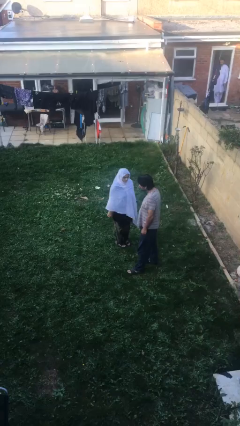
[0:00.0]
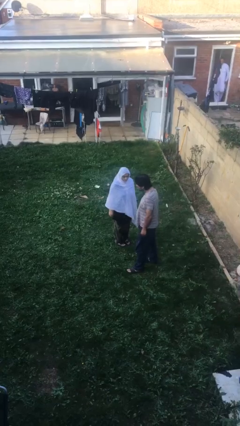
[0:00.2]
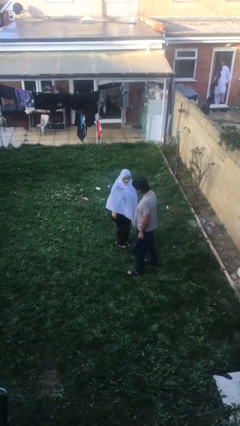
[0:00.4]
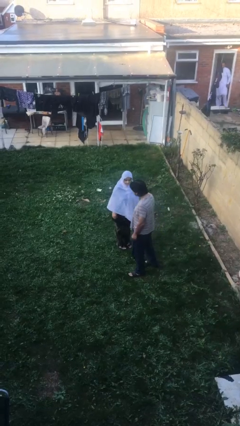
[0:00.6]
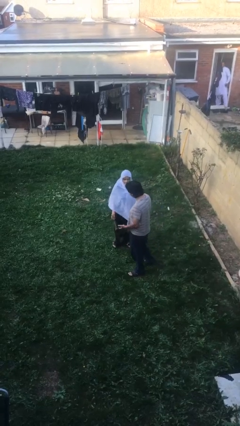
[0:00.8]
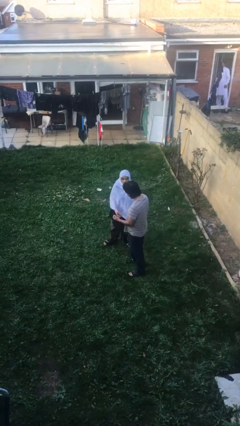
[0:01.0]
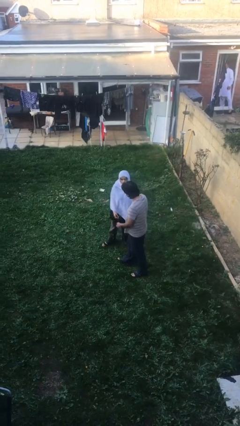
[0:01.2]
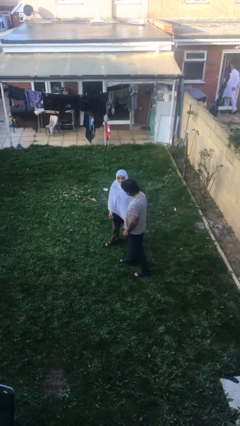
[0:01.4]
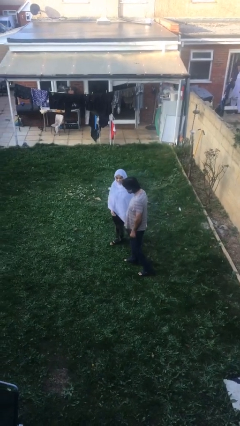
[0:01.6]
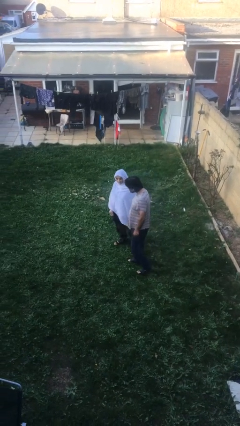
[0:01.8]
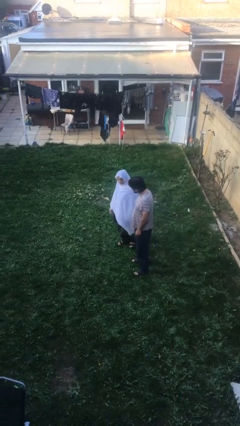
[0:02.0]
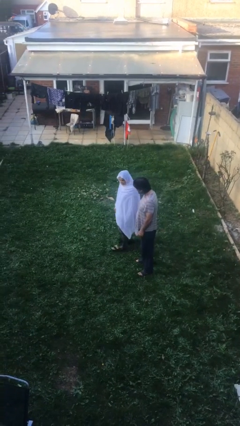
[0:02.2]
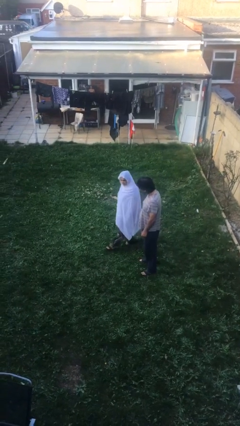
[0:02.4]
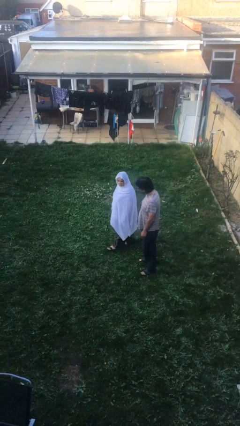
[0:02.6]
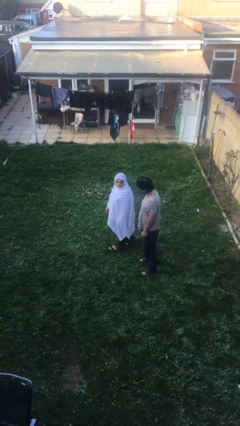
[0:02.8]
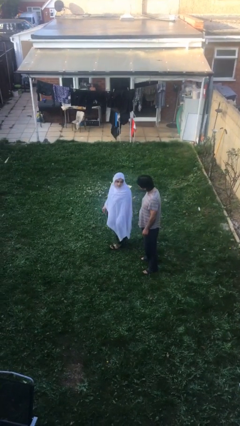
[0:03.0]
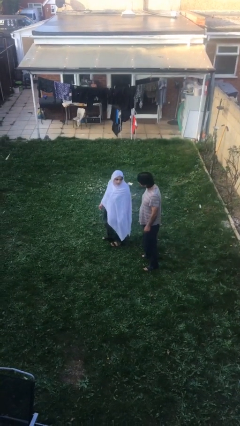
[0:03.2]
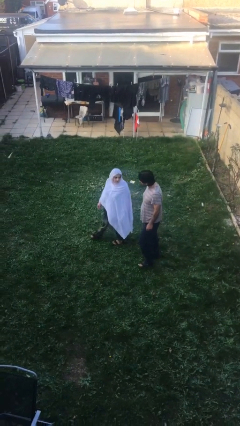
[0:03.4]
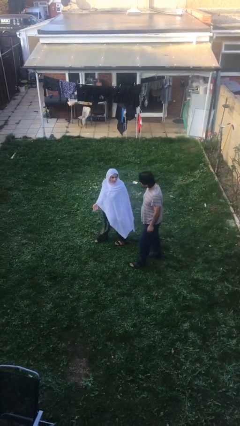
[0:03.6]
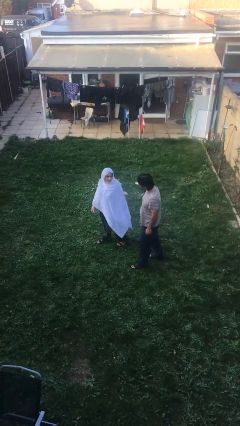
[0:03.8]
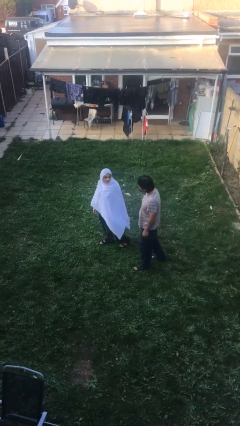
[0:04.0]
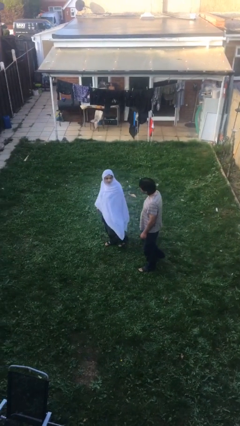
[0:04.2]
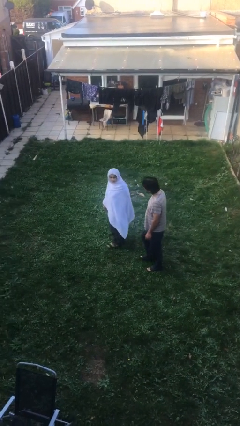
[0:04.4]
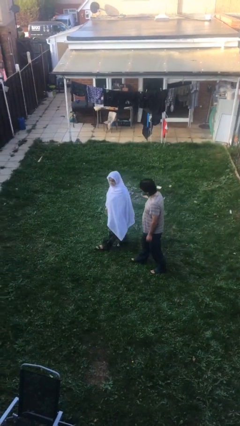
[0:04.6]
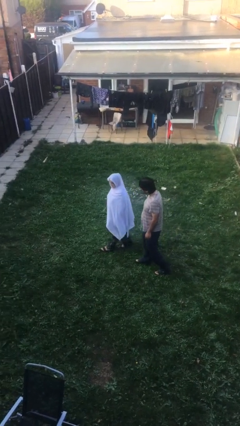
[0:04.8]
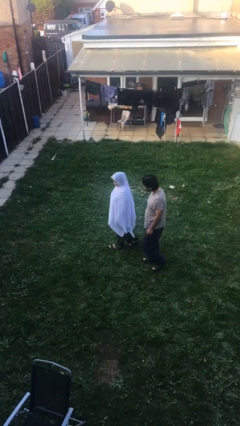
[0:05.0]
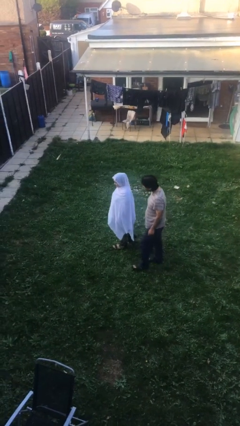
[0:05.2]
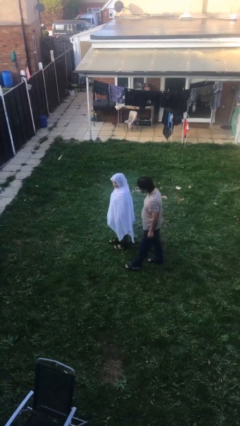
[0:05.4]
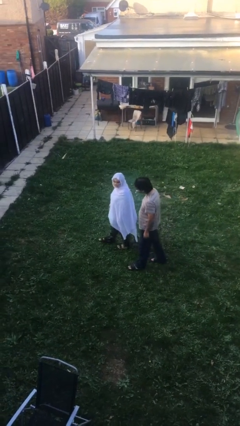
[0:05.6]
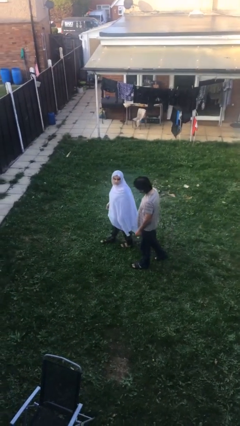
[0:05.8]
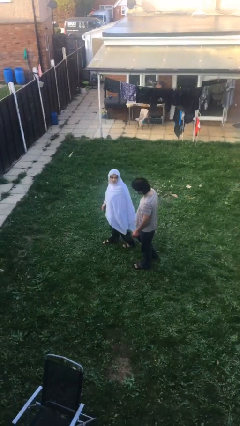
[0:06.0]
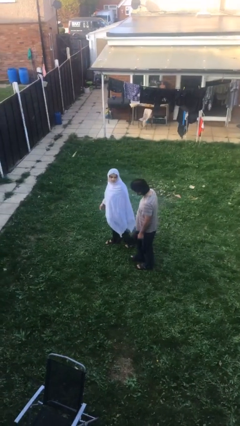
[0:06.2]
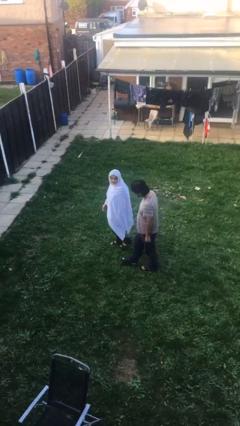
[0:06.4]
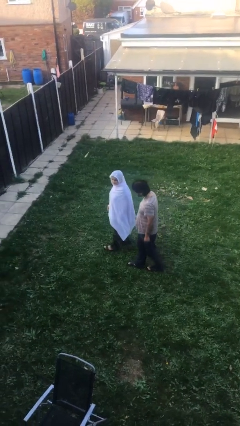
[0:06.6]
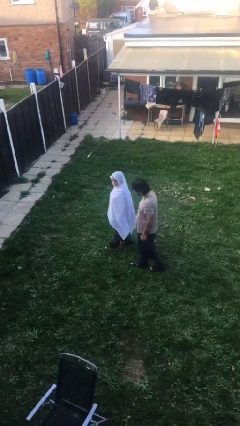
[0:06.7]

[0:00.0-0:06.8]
person talks to person

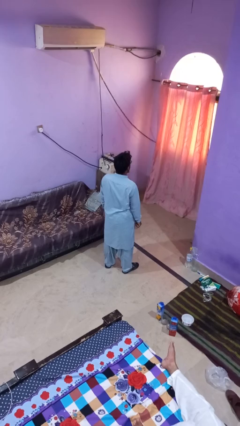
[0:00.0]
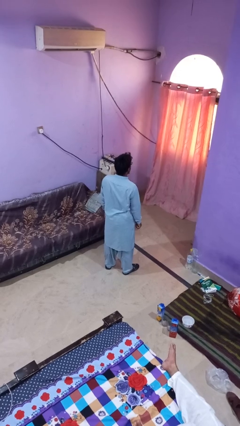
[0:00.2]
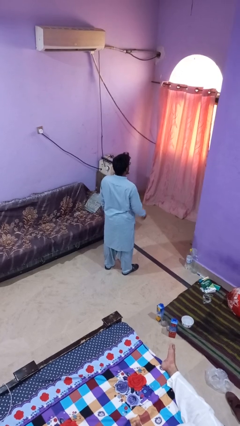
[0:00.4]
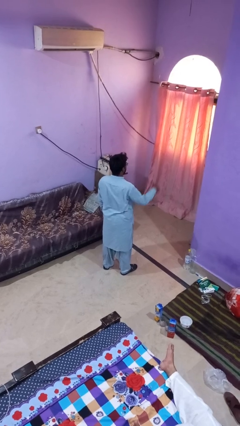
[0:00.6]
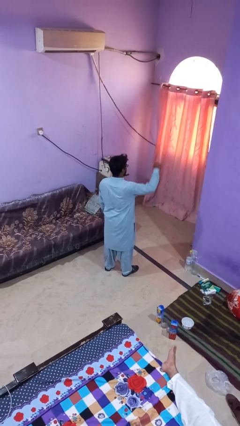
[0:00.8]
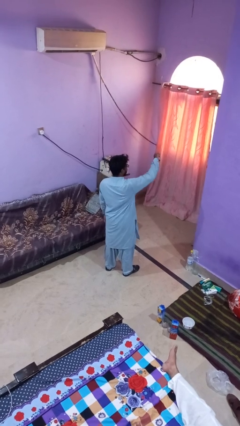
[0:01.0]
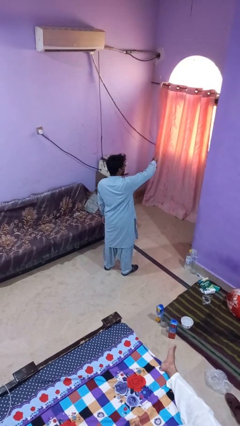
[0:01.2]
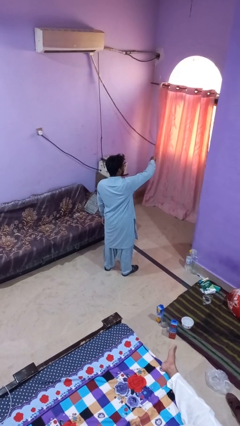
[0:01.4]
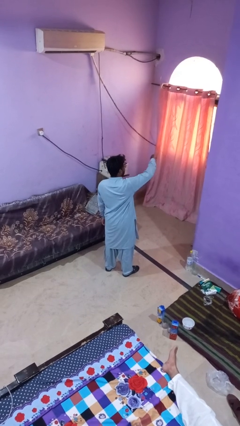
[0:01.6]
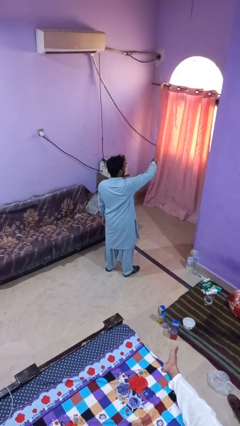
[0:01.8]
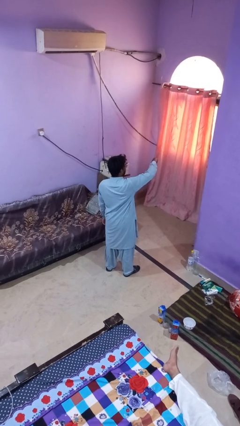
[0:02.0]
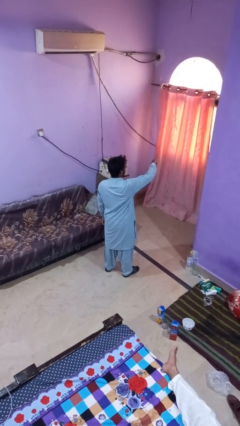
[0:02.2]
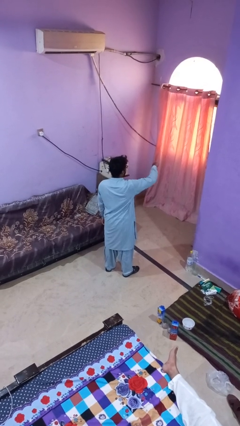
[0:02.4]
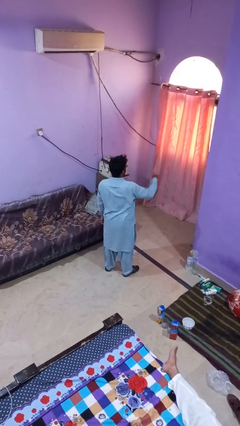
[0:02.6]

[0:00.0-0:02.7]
person gestures thumbs down

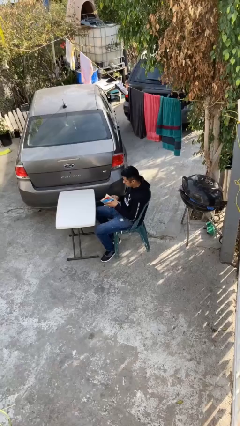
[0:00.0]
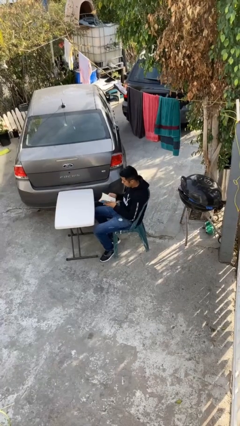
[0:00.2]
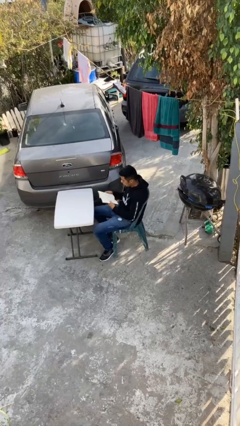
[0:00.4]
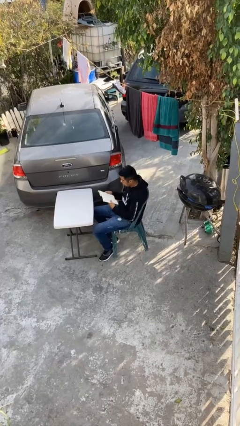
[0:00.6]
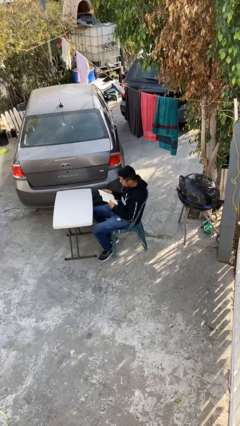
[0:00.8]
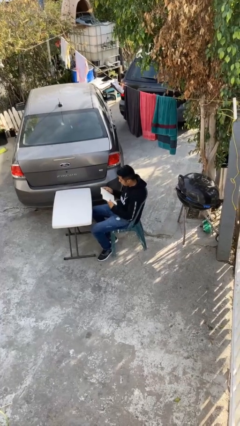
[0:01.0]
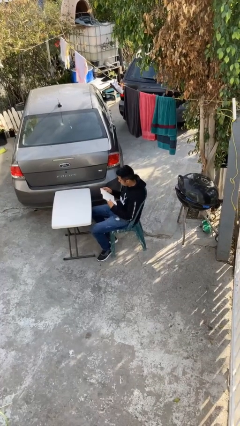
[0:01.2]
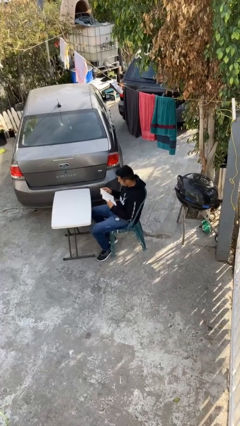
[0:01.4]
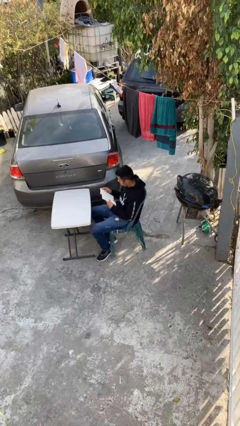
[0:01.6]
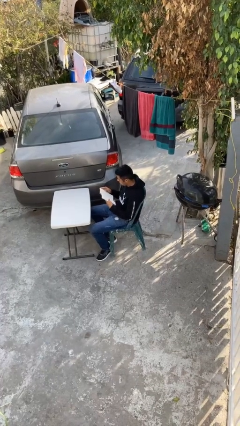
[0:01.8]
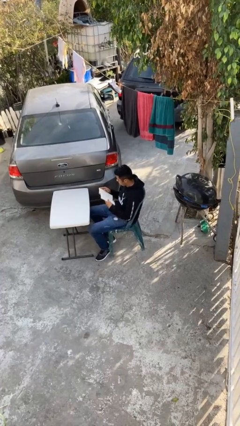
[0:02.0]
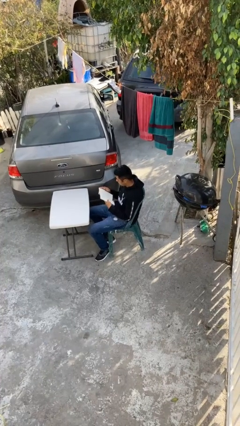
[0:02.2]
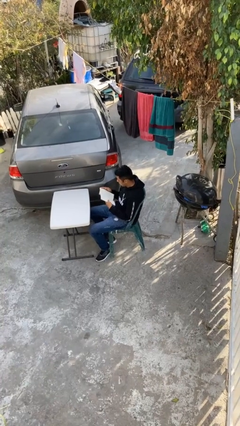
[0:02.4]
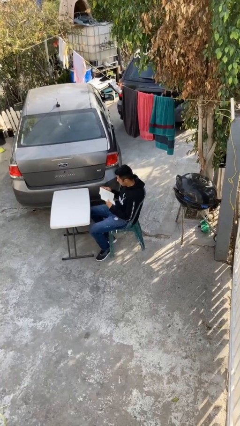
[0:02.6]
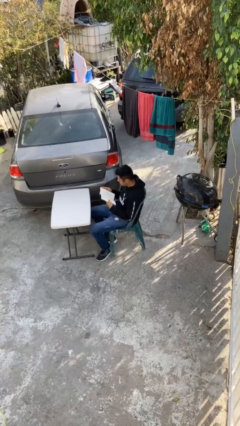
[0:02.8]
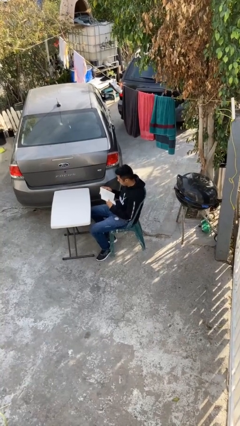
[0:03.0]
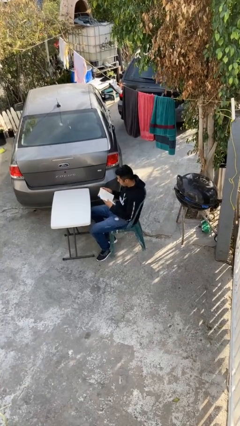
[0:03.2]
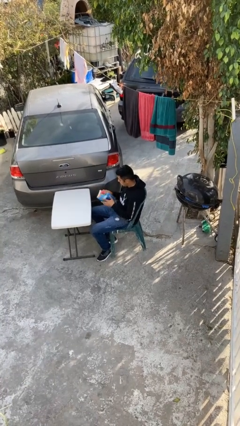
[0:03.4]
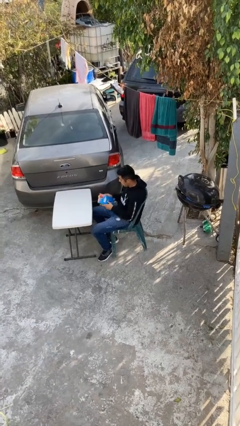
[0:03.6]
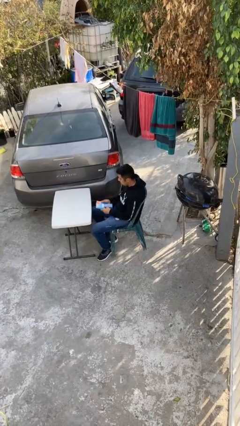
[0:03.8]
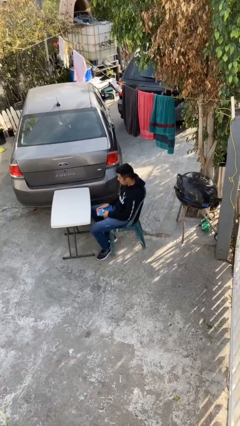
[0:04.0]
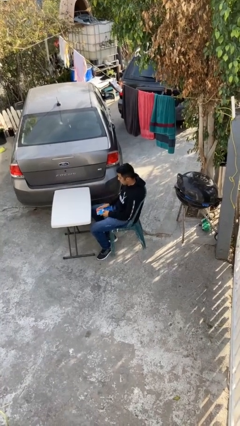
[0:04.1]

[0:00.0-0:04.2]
person reads document

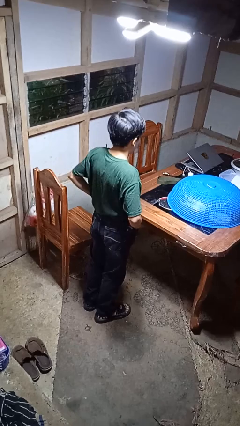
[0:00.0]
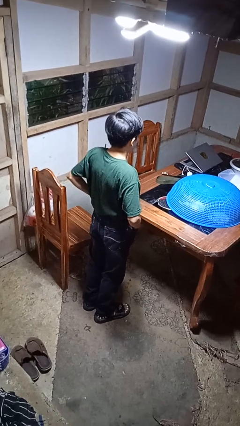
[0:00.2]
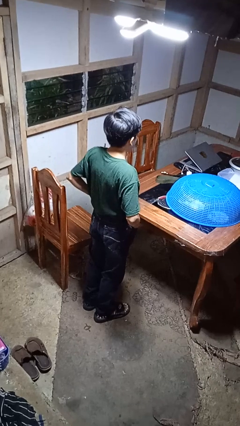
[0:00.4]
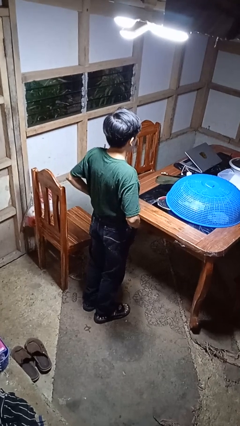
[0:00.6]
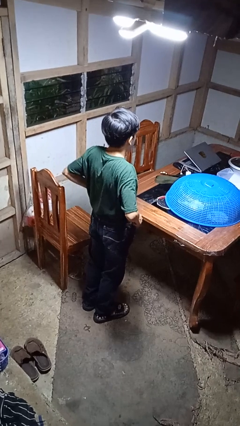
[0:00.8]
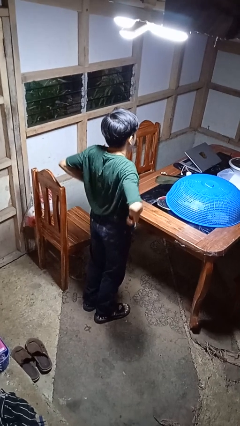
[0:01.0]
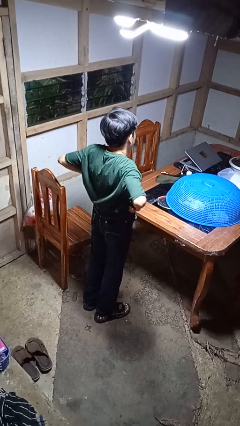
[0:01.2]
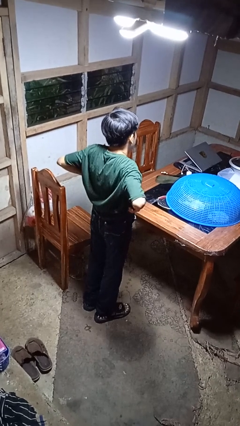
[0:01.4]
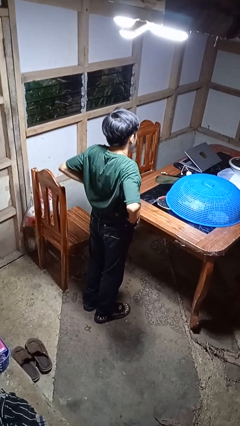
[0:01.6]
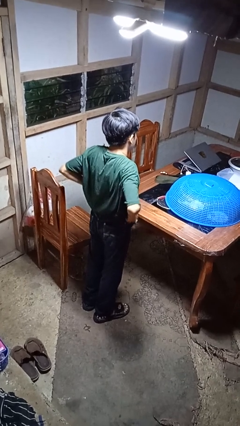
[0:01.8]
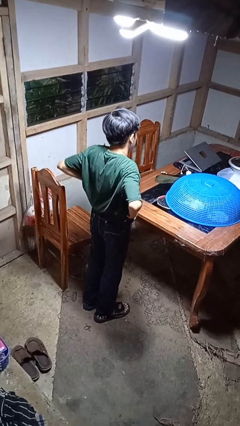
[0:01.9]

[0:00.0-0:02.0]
person hikes up pants

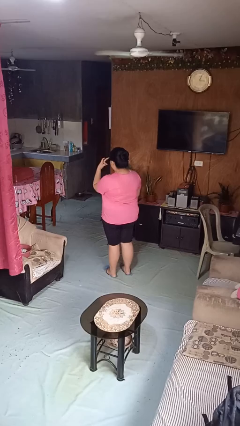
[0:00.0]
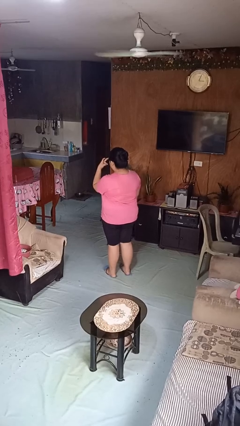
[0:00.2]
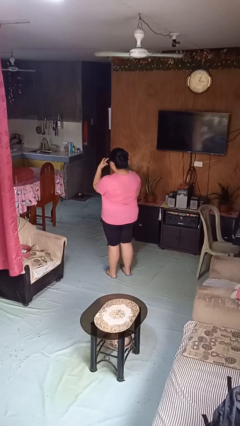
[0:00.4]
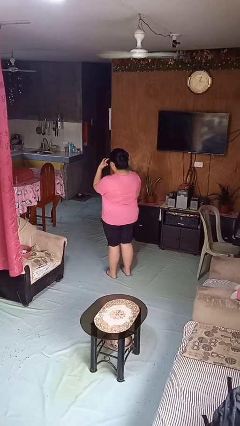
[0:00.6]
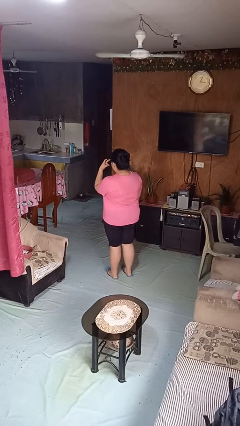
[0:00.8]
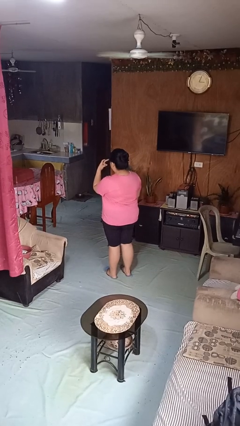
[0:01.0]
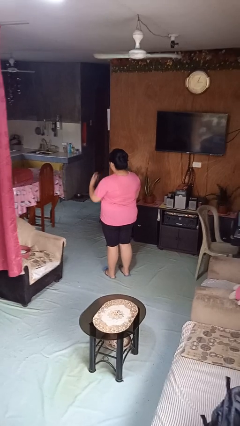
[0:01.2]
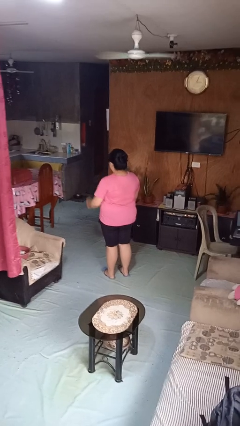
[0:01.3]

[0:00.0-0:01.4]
person gestures watch closely

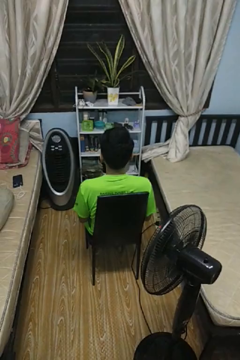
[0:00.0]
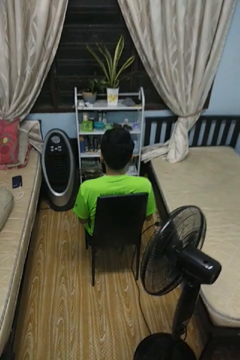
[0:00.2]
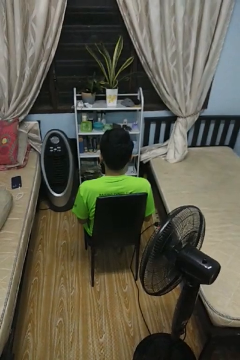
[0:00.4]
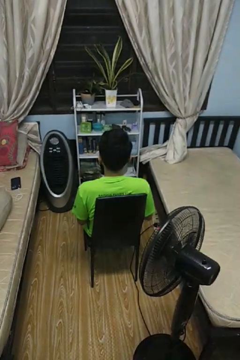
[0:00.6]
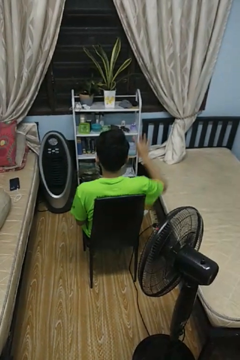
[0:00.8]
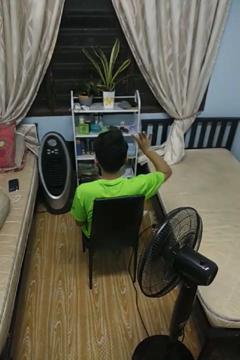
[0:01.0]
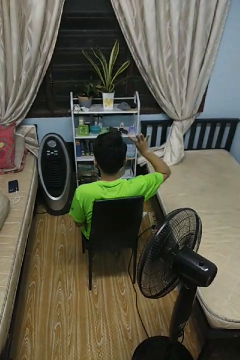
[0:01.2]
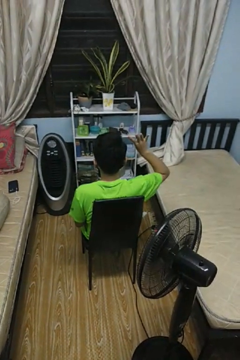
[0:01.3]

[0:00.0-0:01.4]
person gestures number four
